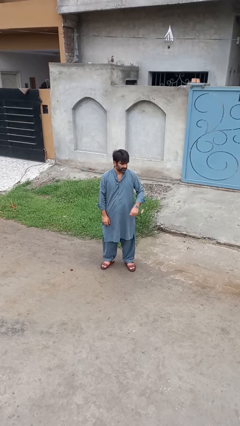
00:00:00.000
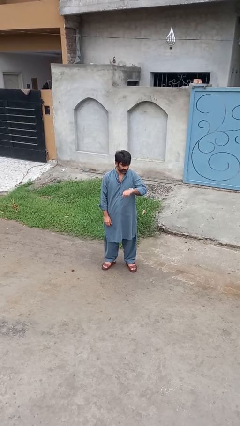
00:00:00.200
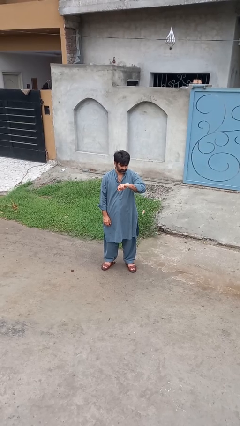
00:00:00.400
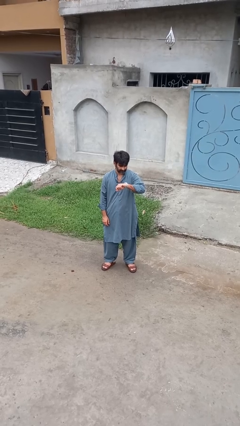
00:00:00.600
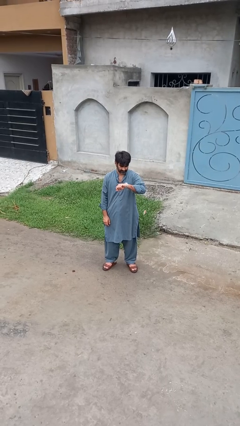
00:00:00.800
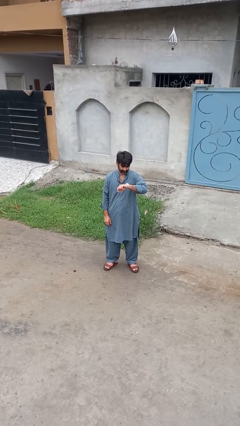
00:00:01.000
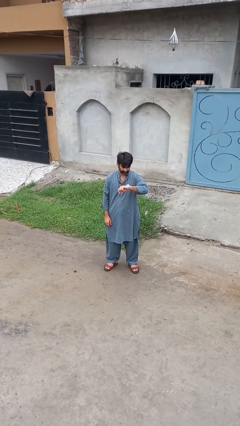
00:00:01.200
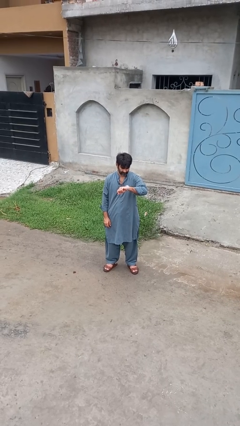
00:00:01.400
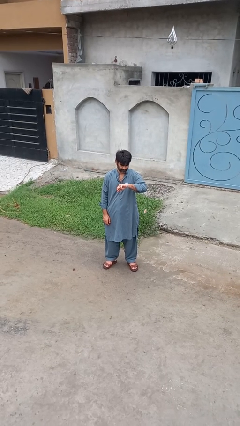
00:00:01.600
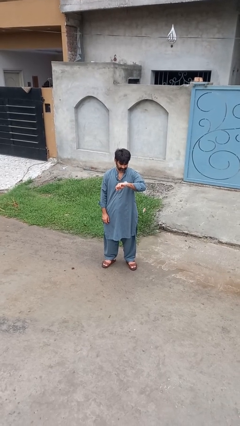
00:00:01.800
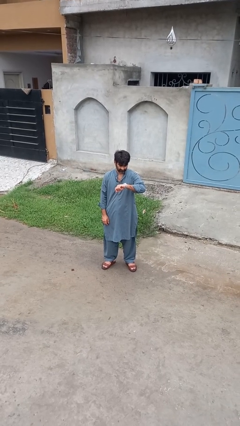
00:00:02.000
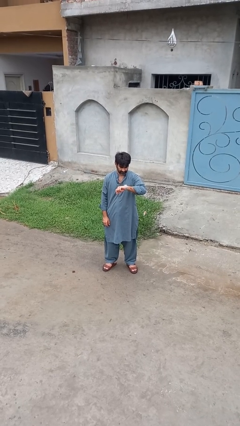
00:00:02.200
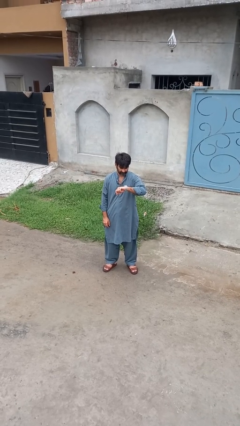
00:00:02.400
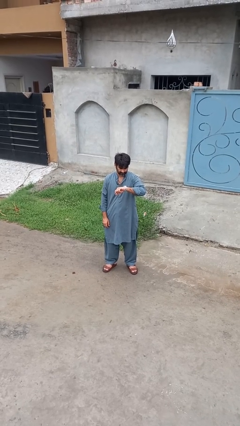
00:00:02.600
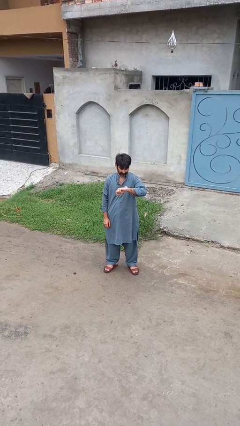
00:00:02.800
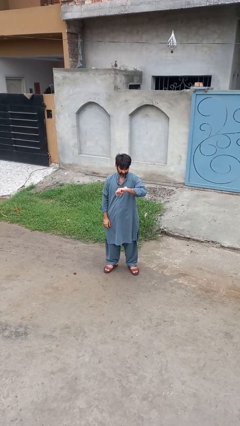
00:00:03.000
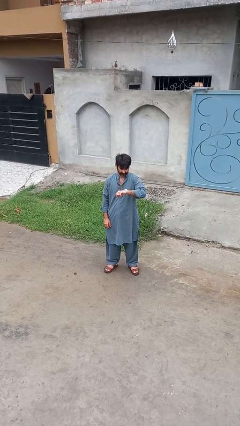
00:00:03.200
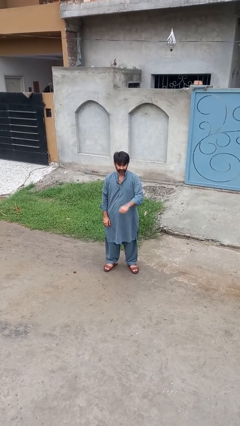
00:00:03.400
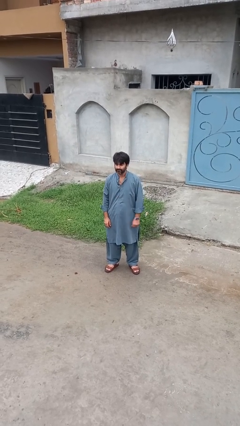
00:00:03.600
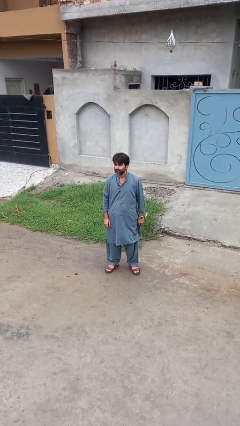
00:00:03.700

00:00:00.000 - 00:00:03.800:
person looks at wristwatch

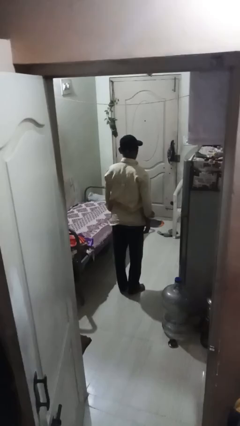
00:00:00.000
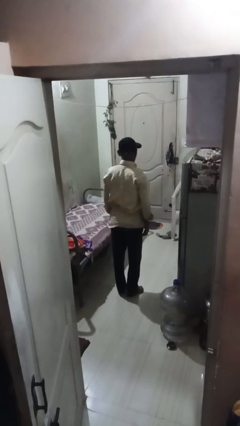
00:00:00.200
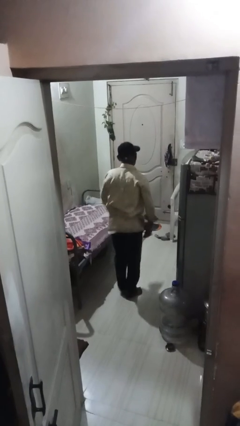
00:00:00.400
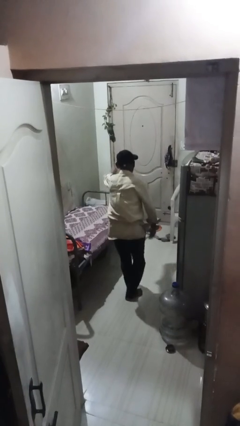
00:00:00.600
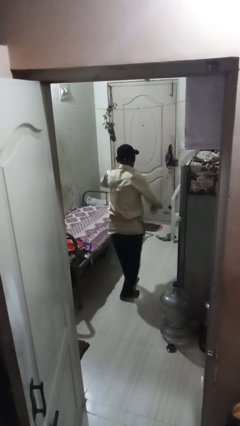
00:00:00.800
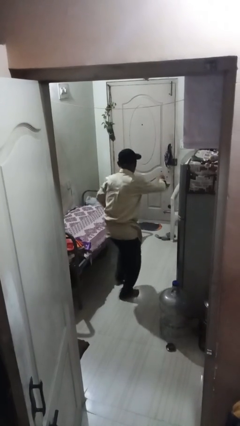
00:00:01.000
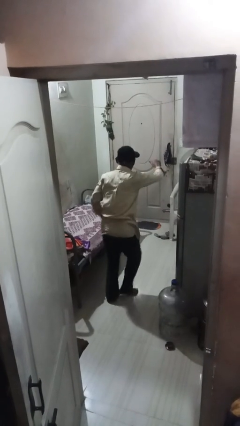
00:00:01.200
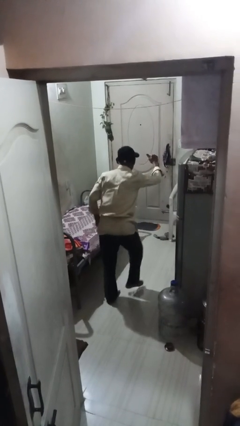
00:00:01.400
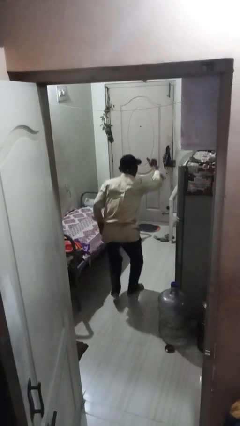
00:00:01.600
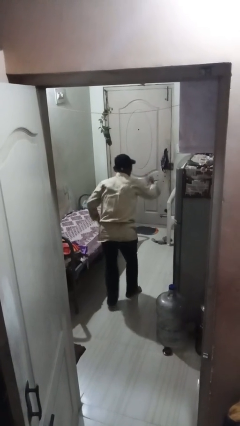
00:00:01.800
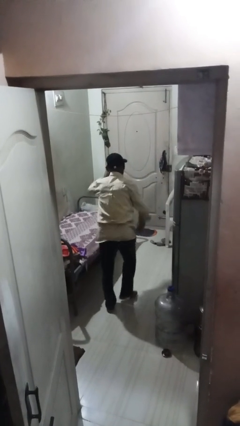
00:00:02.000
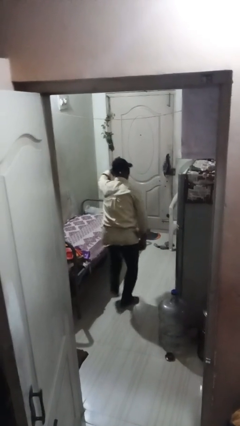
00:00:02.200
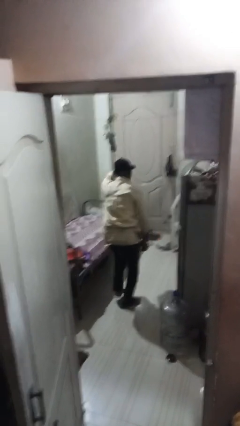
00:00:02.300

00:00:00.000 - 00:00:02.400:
person dances in place

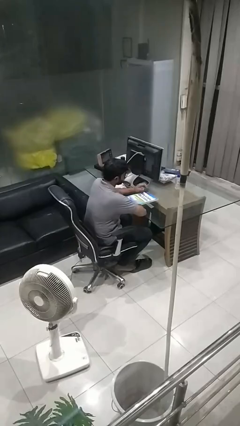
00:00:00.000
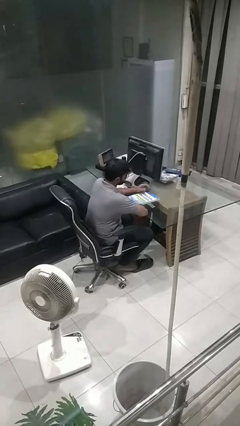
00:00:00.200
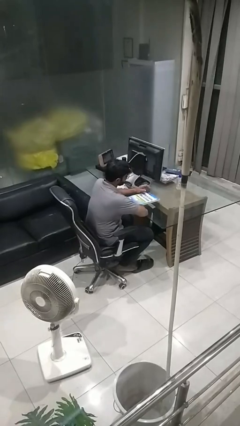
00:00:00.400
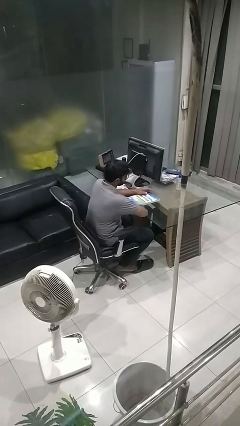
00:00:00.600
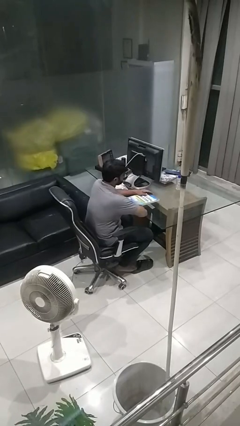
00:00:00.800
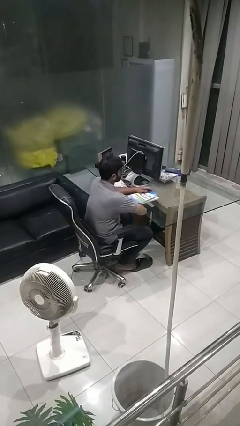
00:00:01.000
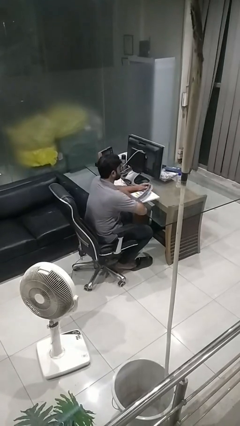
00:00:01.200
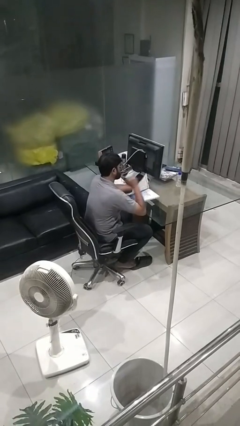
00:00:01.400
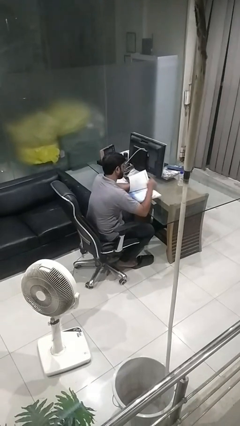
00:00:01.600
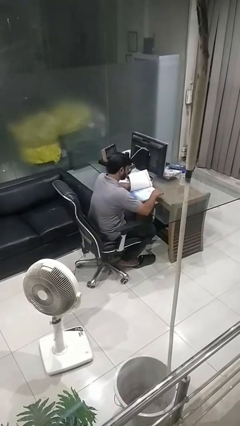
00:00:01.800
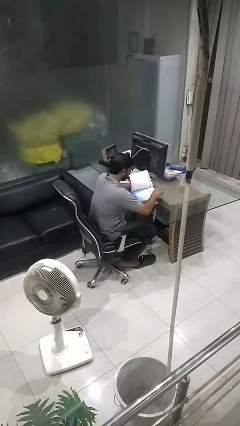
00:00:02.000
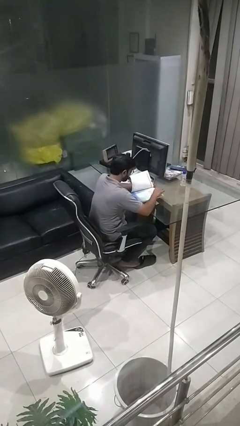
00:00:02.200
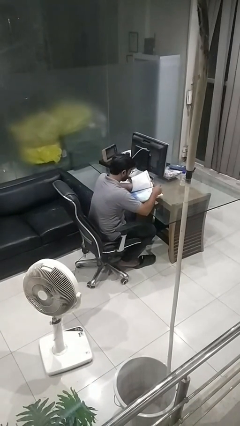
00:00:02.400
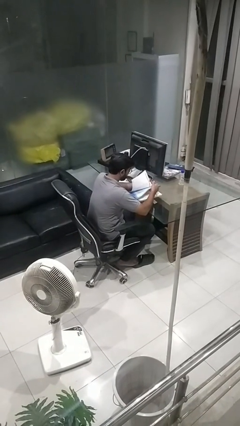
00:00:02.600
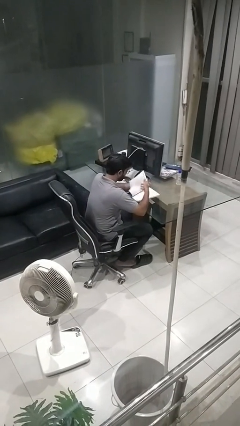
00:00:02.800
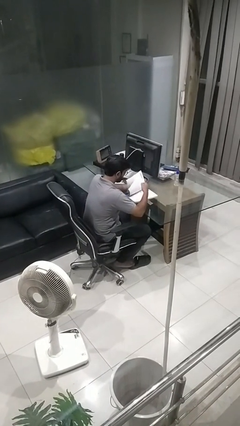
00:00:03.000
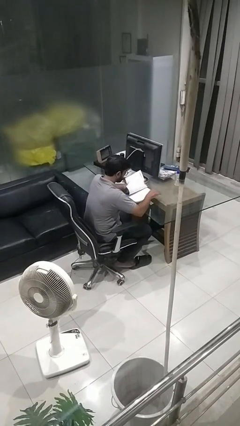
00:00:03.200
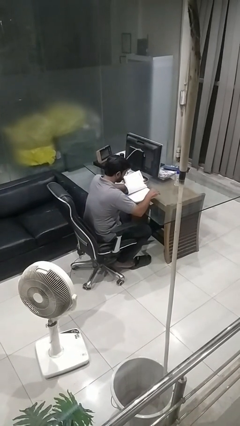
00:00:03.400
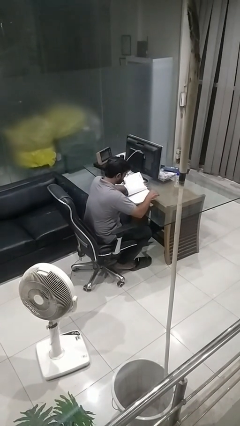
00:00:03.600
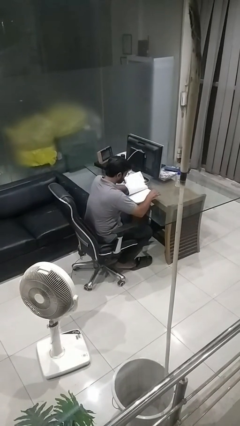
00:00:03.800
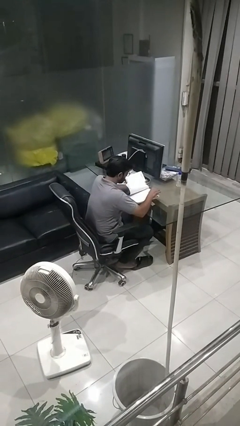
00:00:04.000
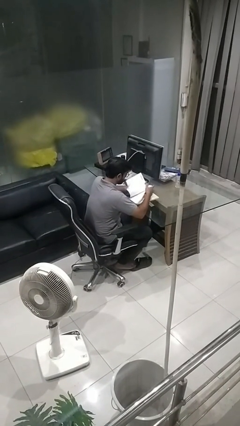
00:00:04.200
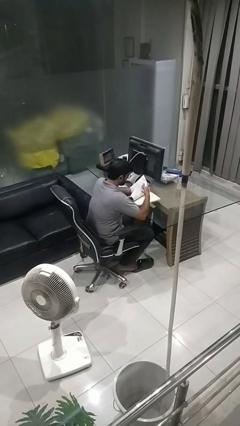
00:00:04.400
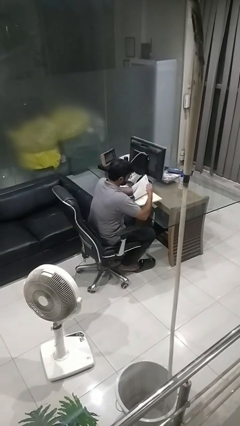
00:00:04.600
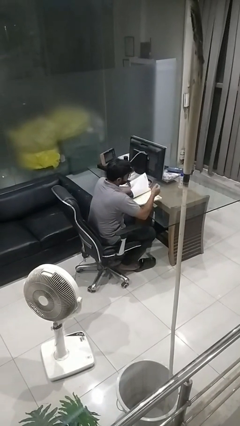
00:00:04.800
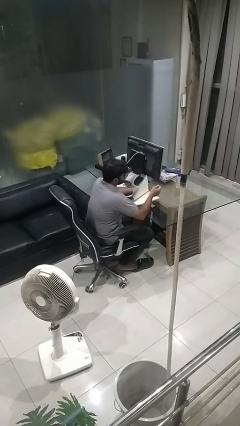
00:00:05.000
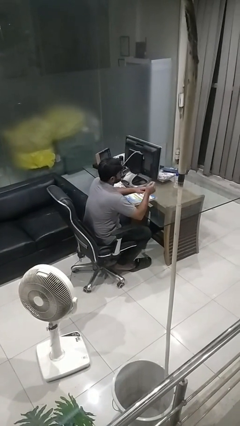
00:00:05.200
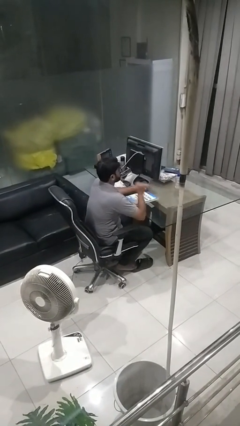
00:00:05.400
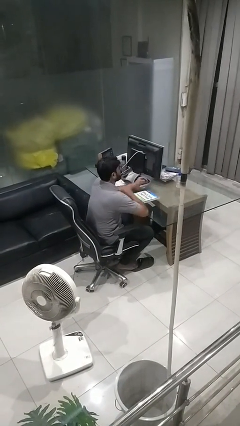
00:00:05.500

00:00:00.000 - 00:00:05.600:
person reads book

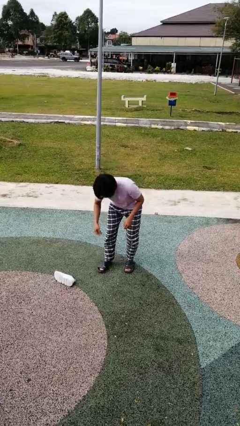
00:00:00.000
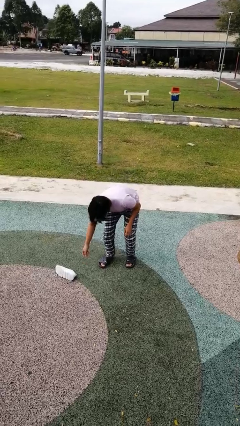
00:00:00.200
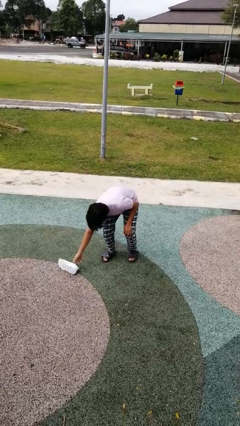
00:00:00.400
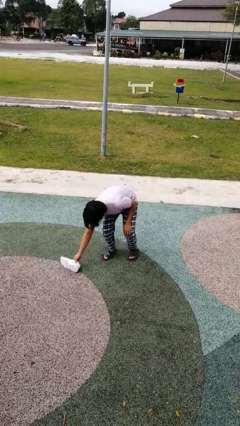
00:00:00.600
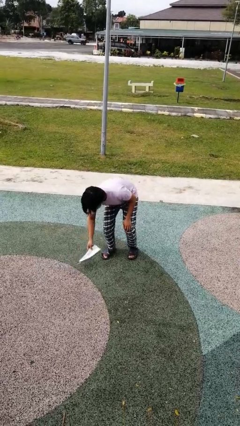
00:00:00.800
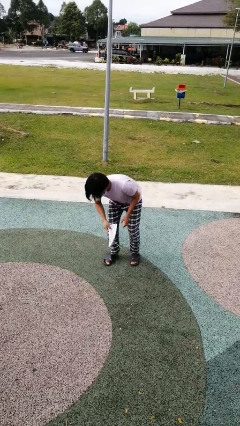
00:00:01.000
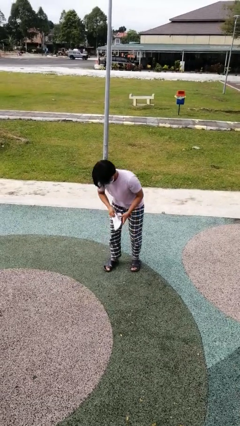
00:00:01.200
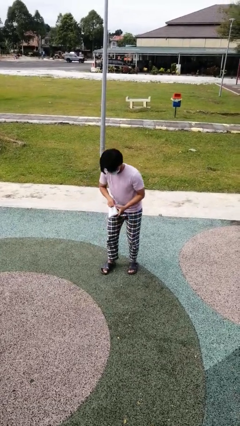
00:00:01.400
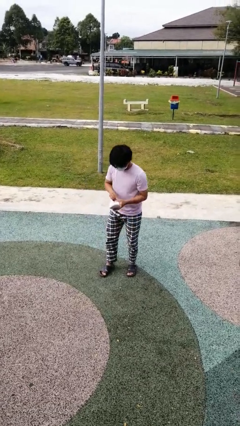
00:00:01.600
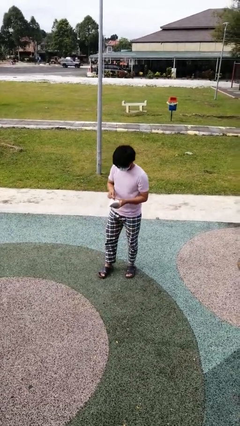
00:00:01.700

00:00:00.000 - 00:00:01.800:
person picks up object from floor

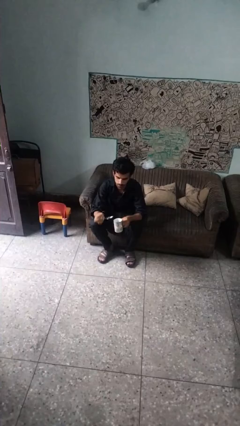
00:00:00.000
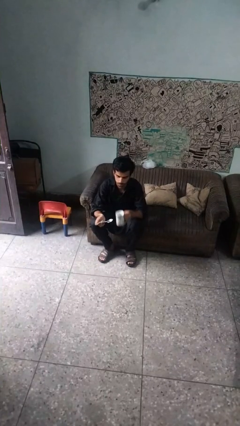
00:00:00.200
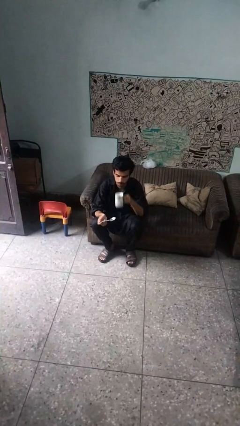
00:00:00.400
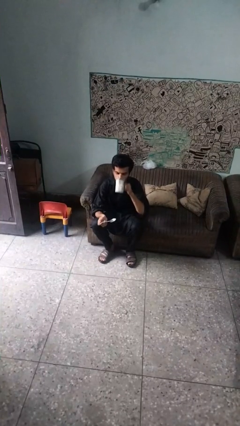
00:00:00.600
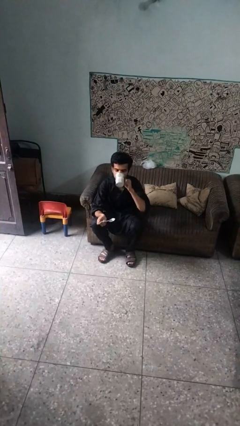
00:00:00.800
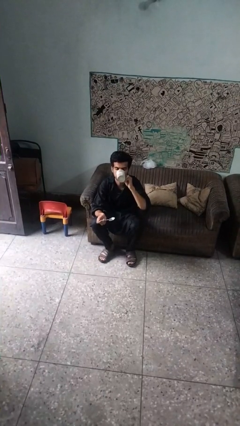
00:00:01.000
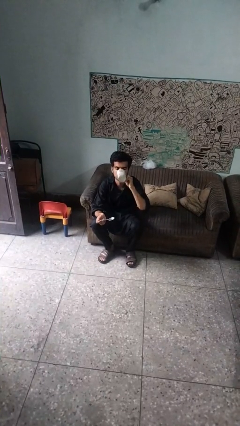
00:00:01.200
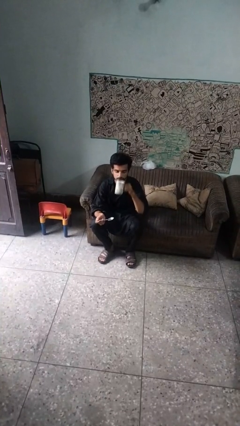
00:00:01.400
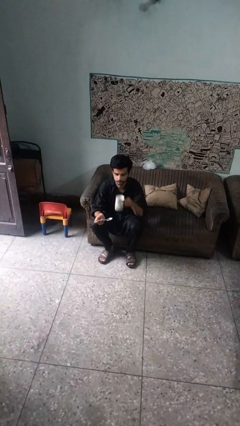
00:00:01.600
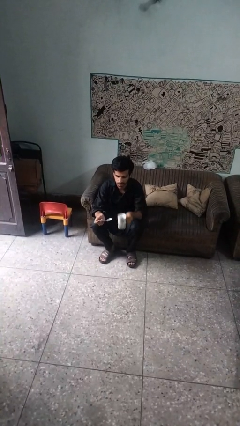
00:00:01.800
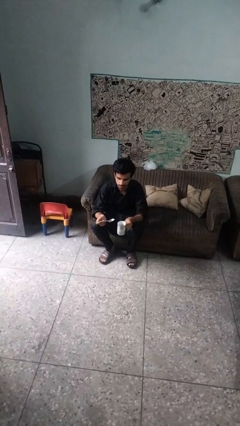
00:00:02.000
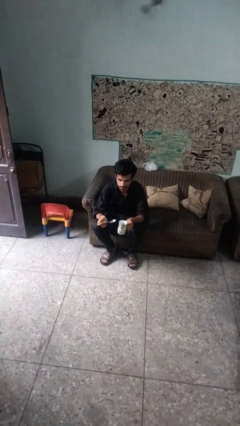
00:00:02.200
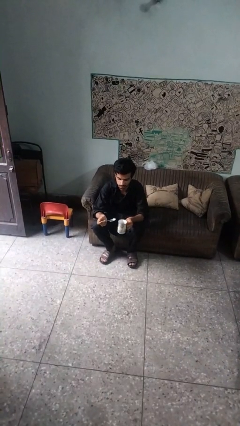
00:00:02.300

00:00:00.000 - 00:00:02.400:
person drinks from mug

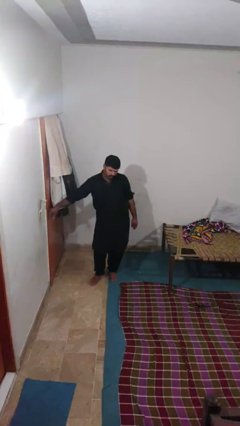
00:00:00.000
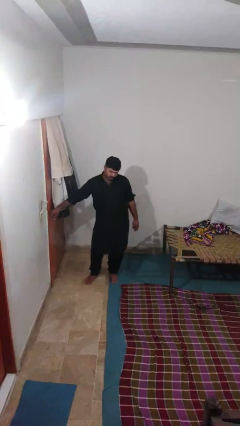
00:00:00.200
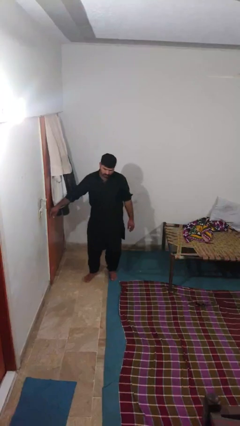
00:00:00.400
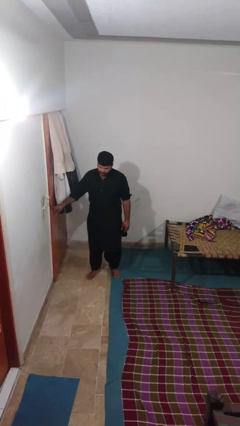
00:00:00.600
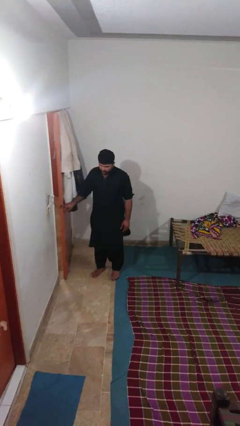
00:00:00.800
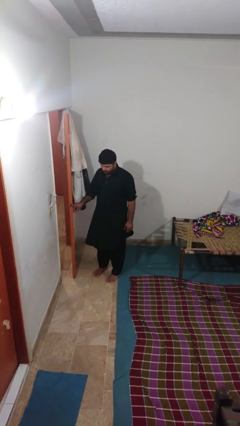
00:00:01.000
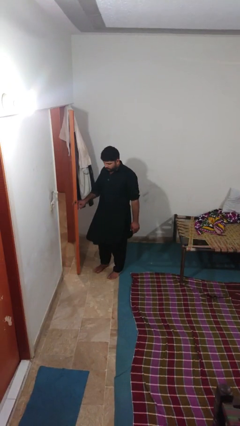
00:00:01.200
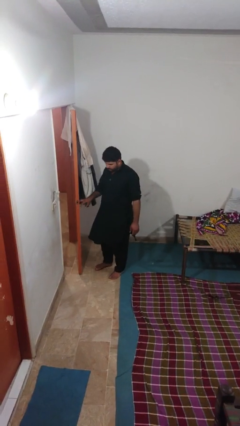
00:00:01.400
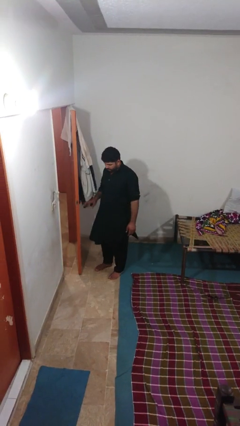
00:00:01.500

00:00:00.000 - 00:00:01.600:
person opens facility door
